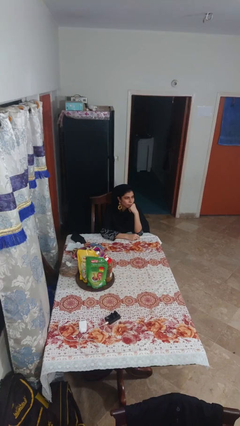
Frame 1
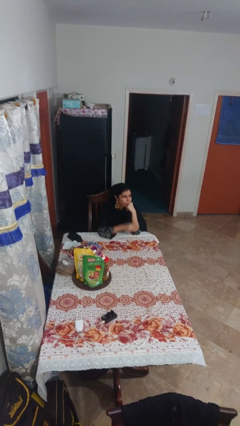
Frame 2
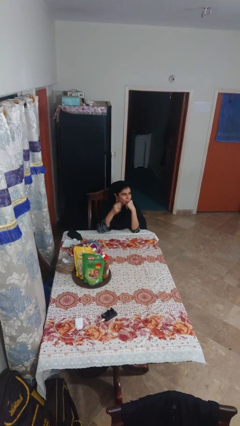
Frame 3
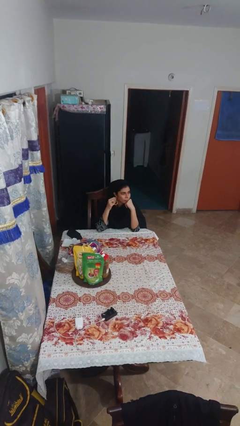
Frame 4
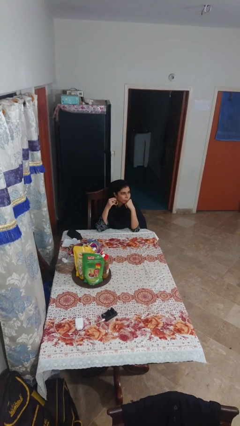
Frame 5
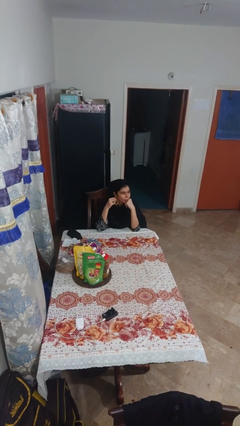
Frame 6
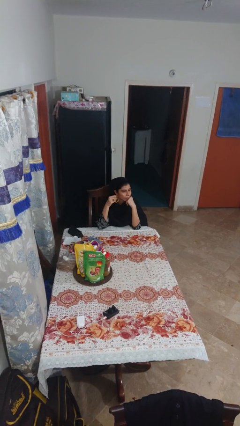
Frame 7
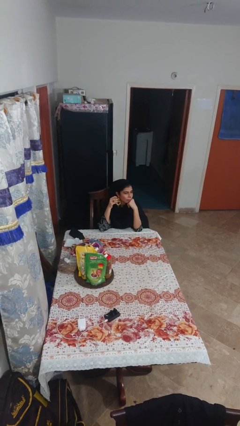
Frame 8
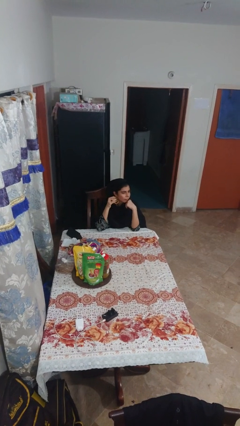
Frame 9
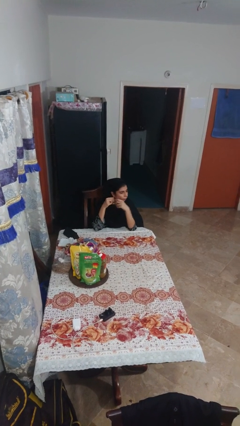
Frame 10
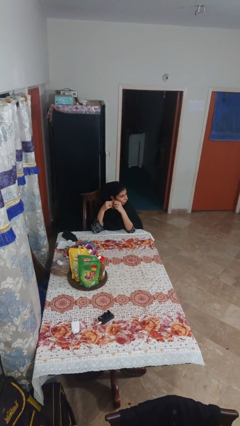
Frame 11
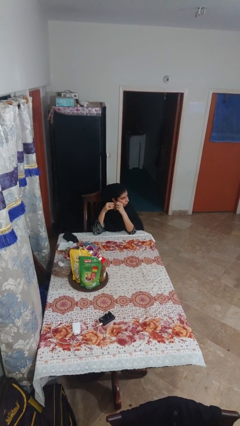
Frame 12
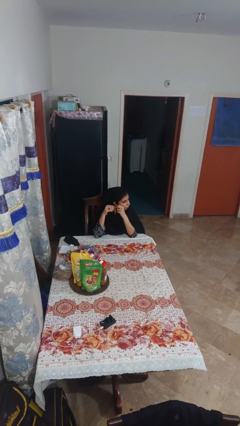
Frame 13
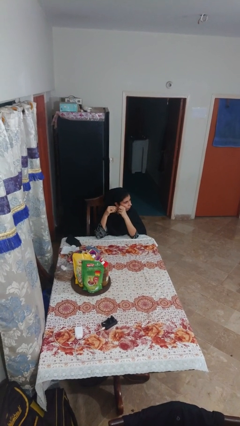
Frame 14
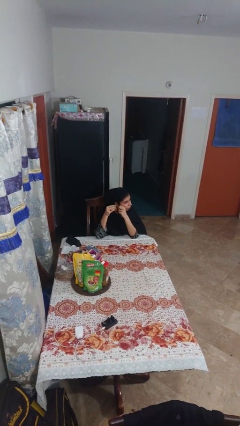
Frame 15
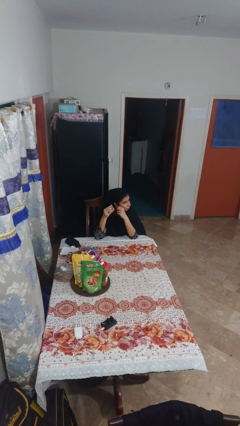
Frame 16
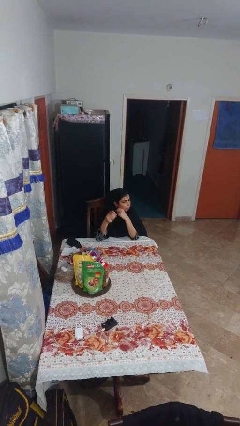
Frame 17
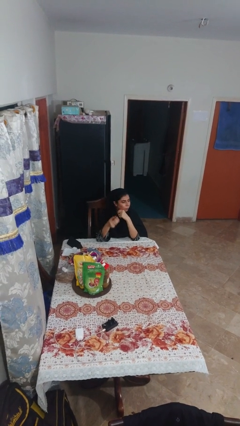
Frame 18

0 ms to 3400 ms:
person takes off earrings

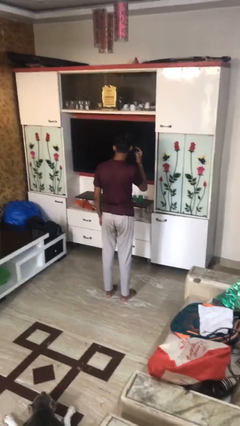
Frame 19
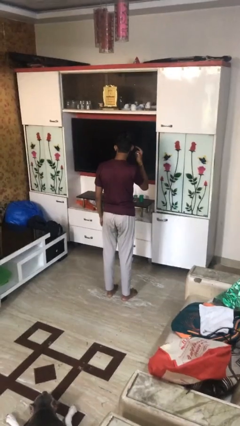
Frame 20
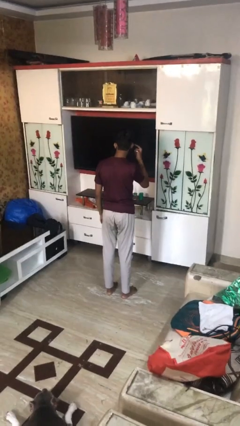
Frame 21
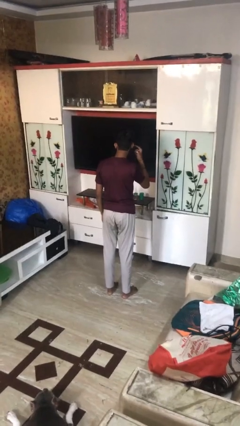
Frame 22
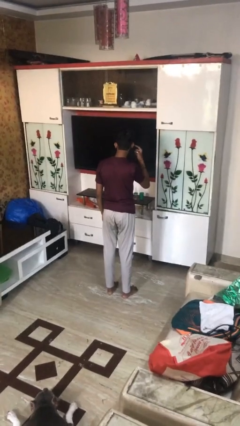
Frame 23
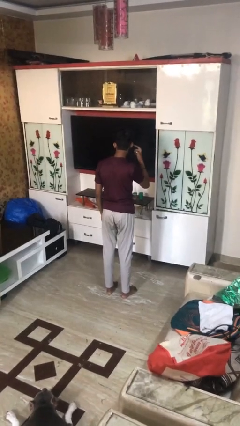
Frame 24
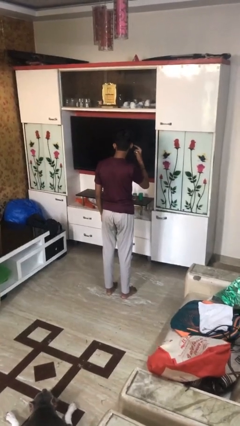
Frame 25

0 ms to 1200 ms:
person gestures listen closely

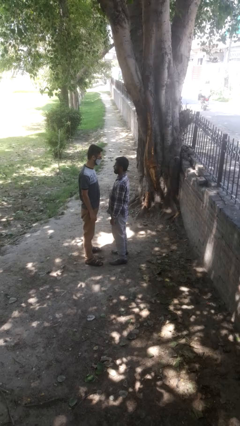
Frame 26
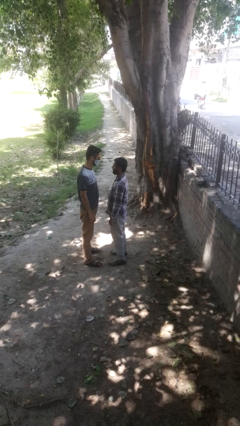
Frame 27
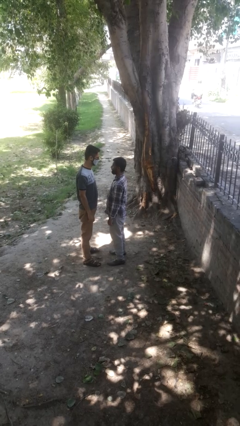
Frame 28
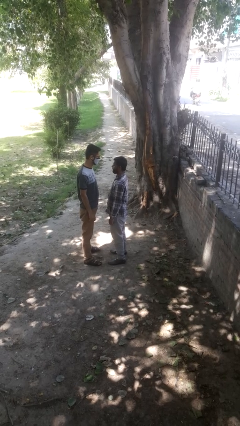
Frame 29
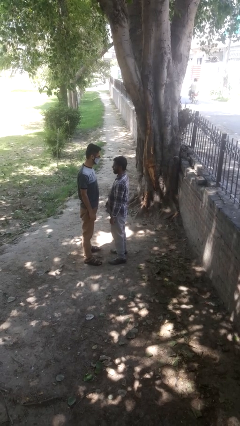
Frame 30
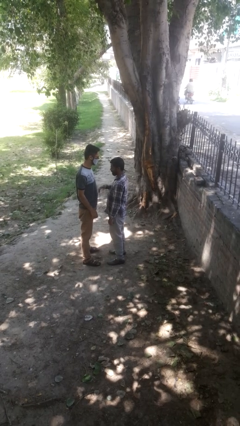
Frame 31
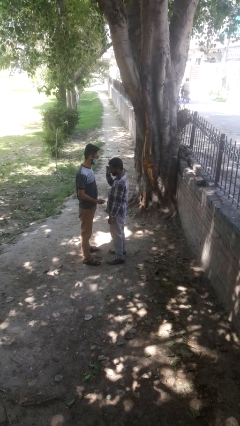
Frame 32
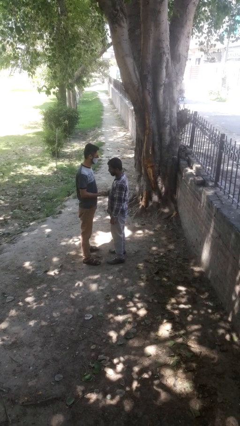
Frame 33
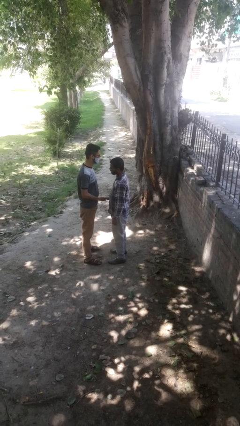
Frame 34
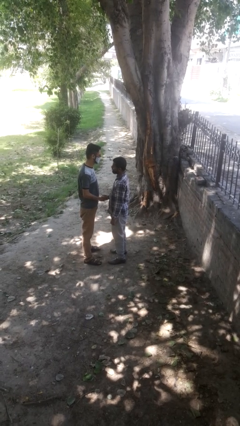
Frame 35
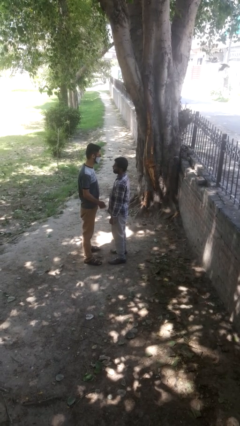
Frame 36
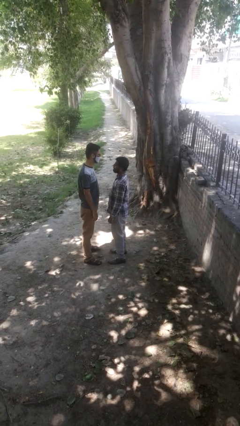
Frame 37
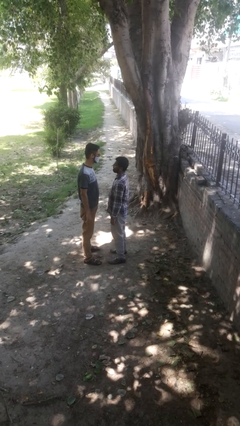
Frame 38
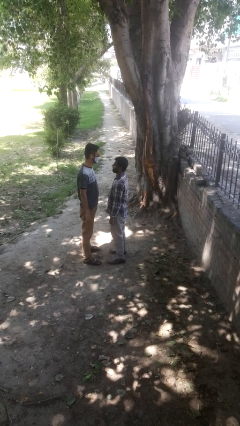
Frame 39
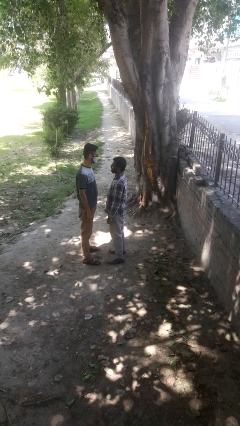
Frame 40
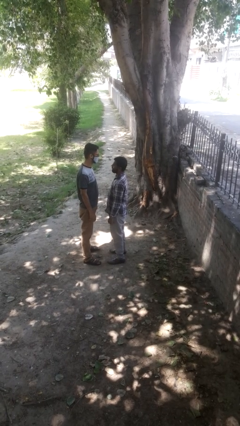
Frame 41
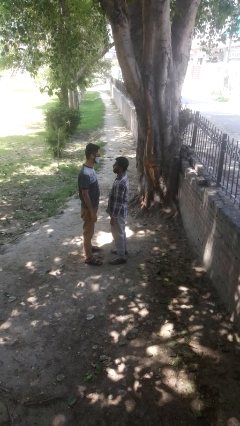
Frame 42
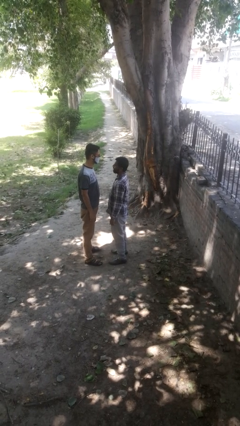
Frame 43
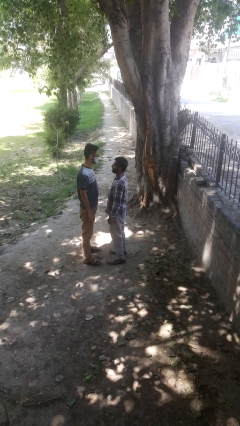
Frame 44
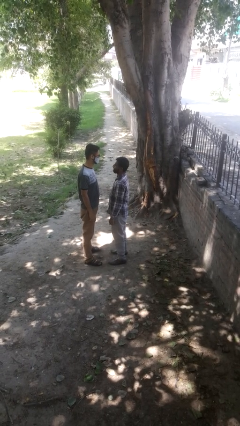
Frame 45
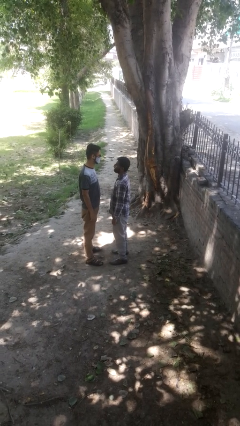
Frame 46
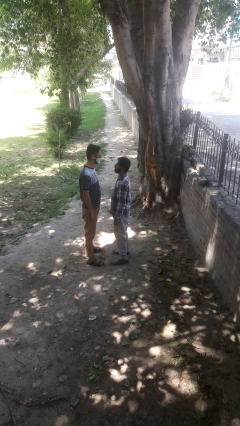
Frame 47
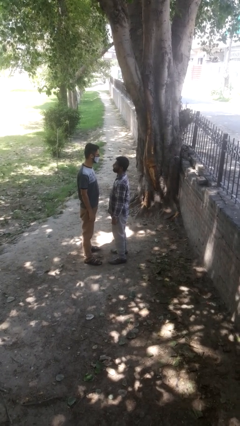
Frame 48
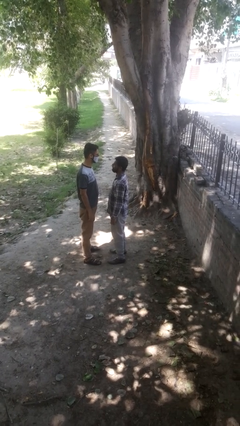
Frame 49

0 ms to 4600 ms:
person highfives hand

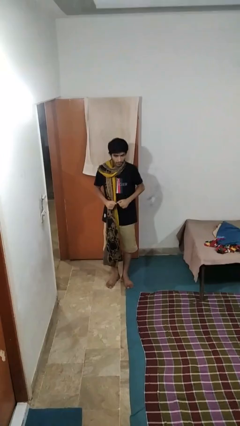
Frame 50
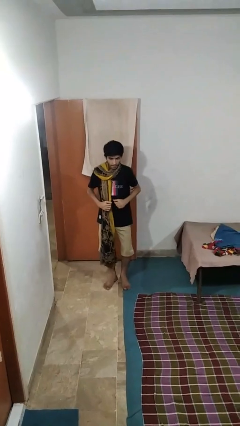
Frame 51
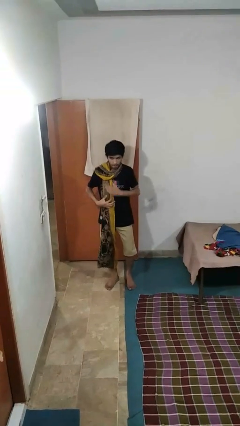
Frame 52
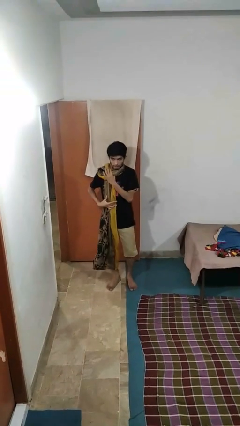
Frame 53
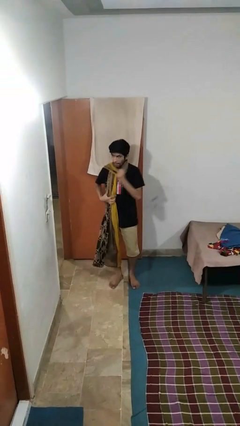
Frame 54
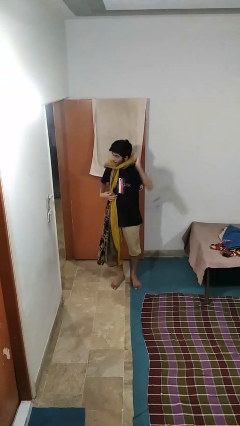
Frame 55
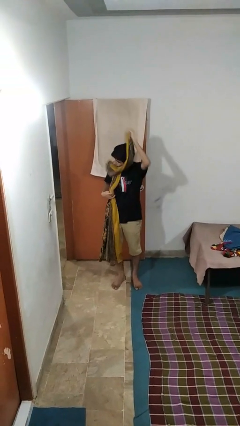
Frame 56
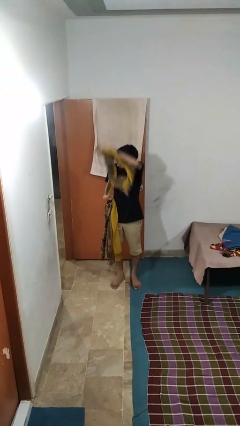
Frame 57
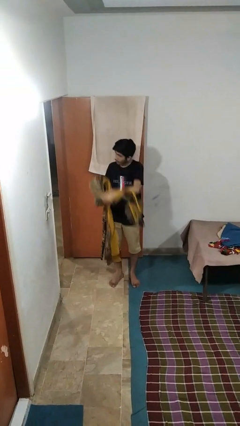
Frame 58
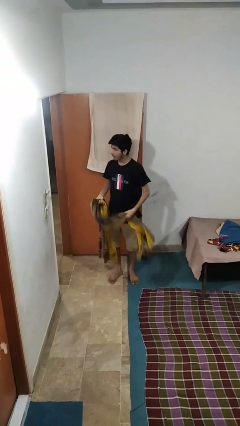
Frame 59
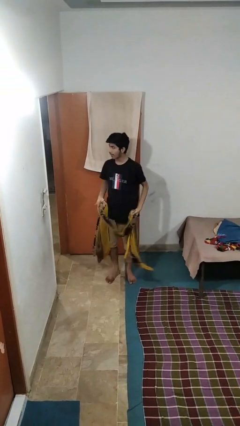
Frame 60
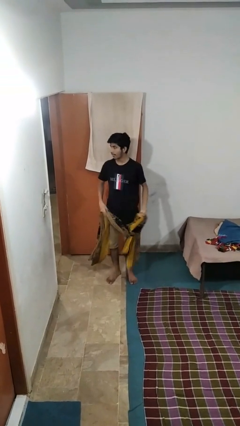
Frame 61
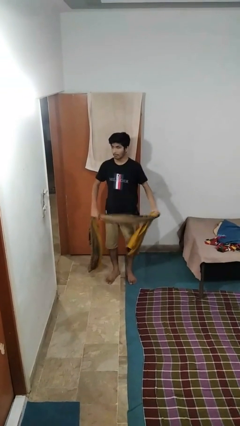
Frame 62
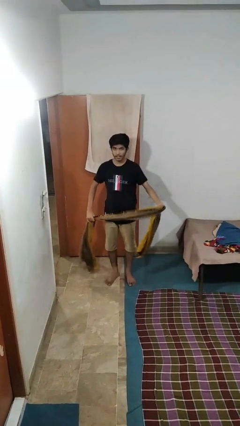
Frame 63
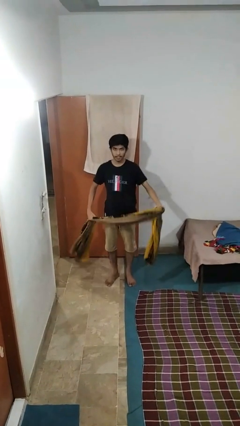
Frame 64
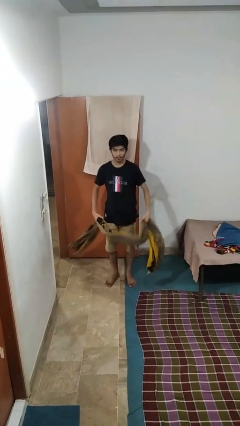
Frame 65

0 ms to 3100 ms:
person takes off scarf

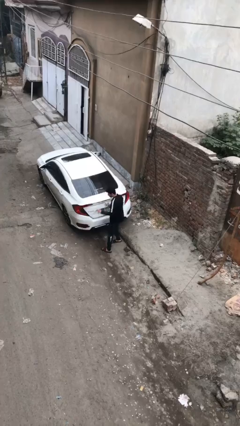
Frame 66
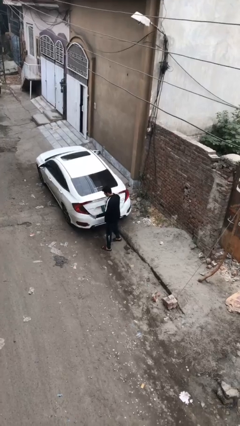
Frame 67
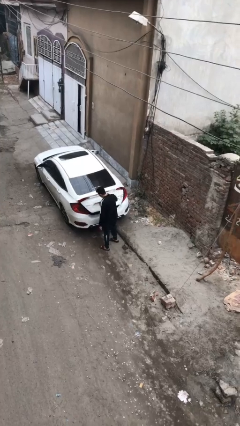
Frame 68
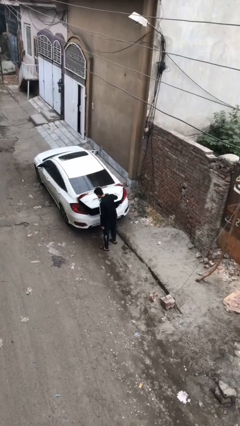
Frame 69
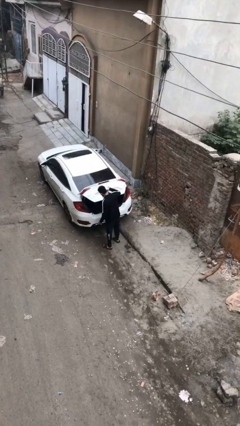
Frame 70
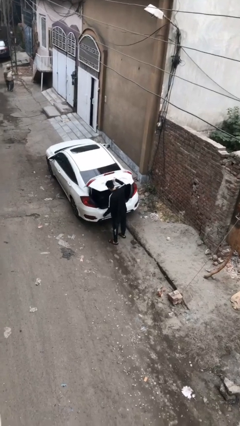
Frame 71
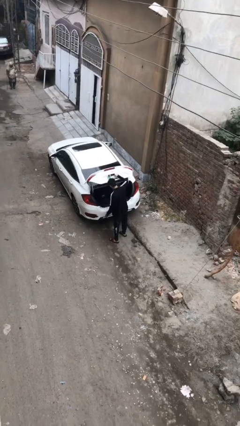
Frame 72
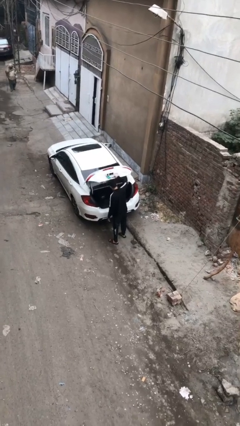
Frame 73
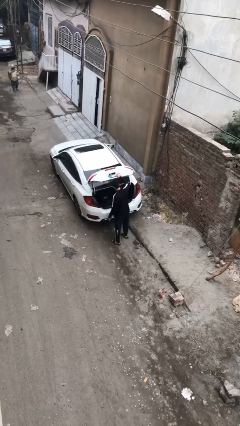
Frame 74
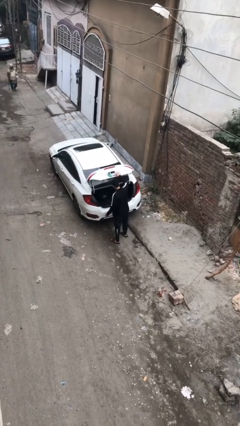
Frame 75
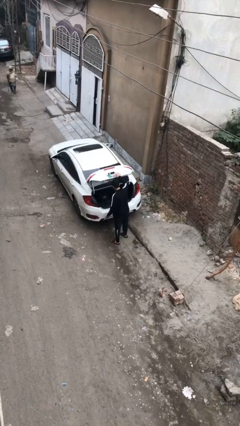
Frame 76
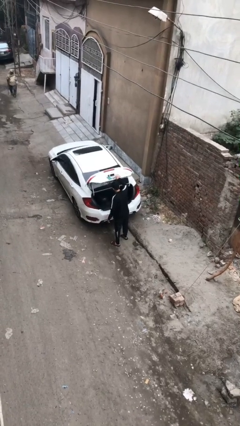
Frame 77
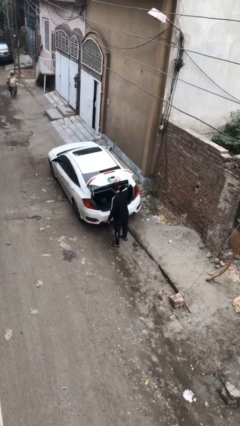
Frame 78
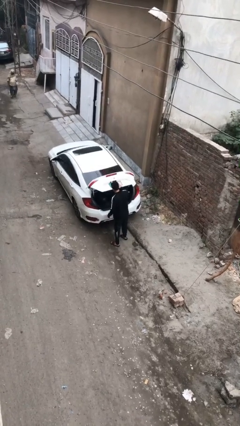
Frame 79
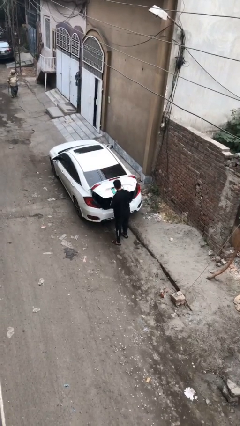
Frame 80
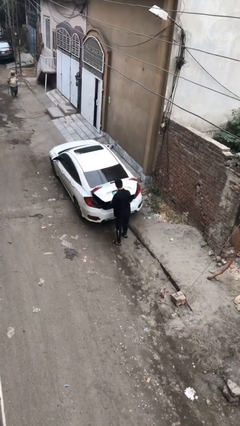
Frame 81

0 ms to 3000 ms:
person opens car trunk

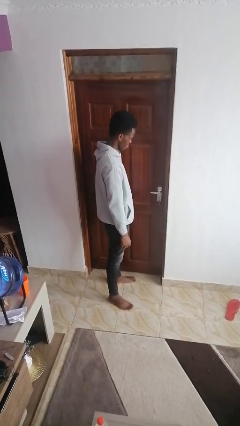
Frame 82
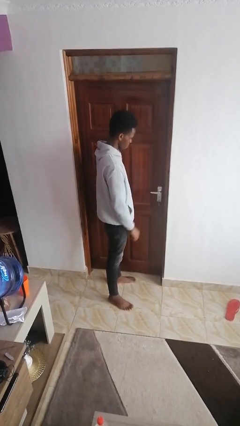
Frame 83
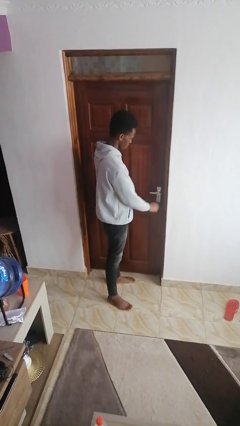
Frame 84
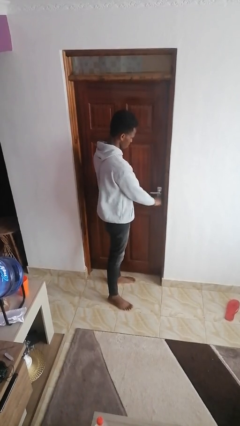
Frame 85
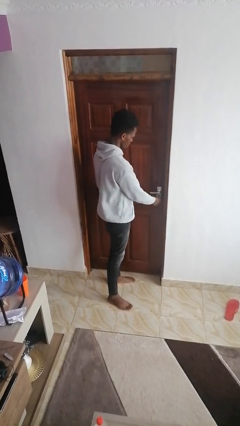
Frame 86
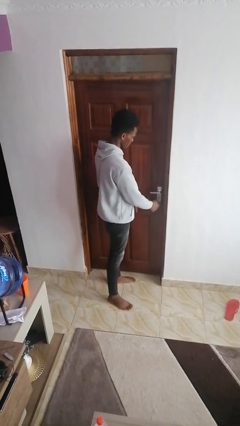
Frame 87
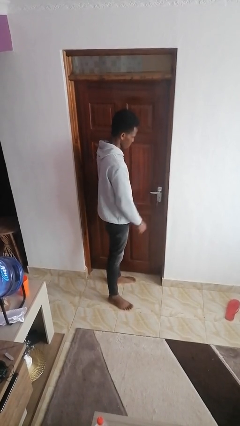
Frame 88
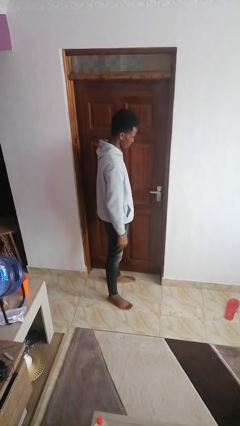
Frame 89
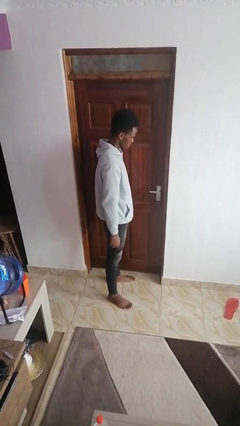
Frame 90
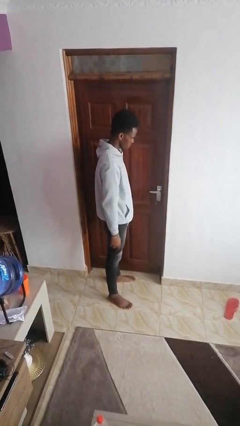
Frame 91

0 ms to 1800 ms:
person locks door with keys

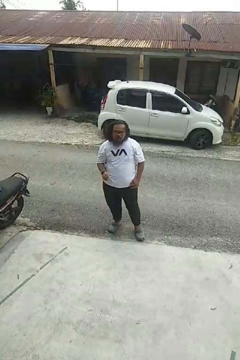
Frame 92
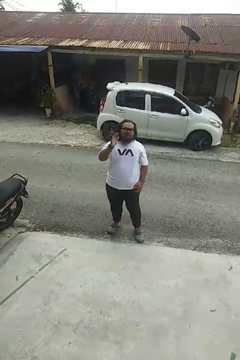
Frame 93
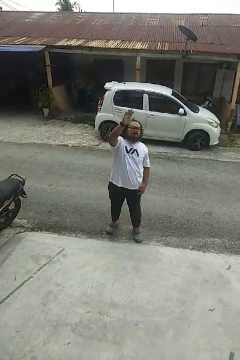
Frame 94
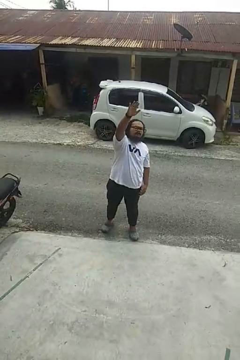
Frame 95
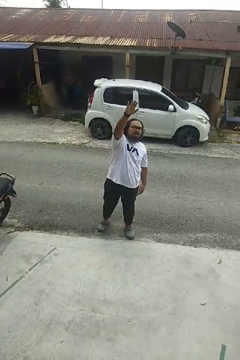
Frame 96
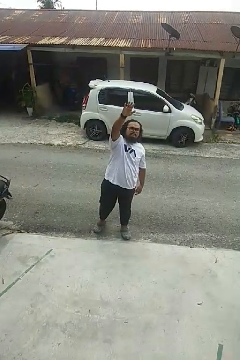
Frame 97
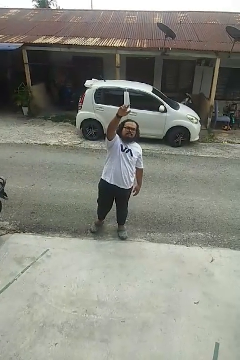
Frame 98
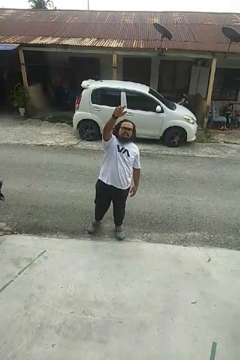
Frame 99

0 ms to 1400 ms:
person gestures raise hand
